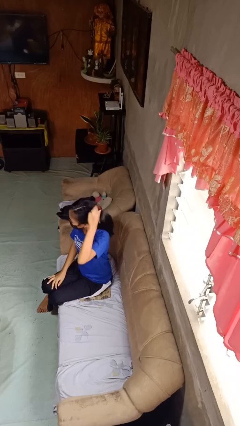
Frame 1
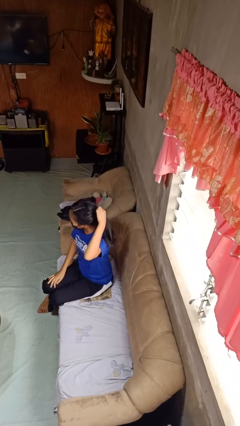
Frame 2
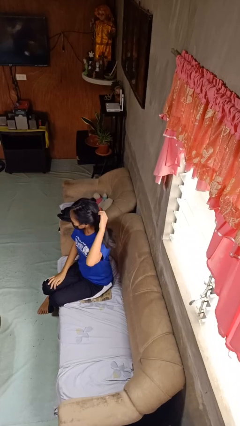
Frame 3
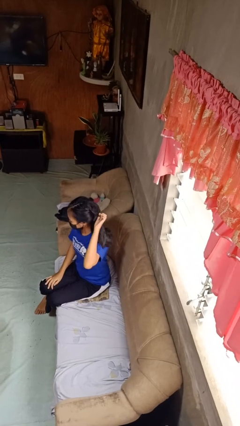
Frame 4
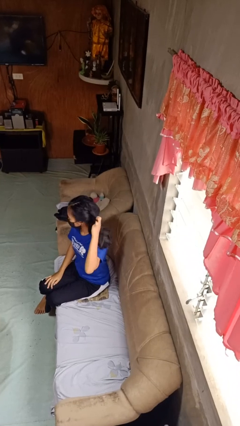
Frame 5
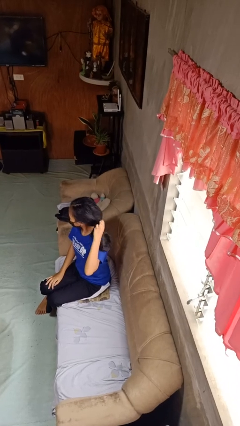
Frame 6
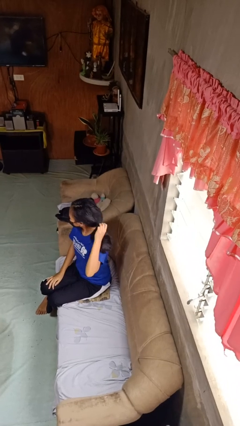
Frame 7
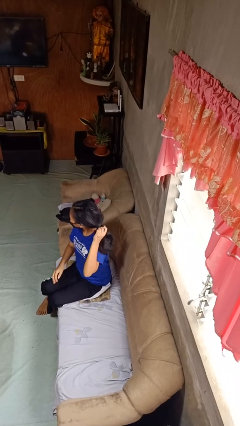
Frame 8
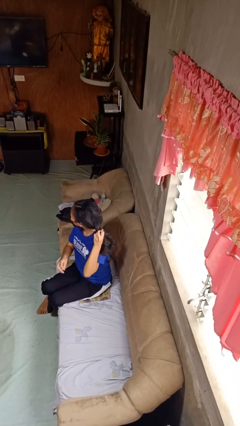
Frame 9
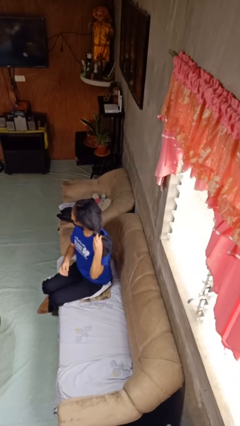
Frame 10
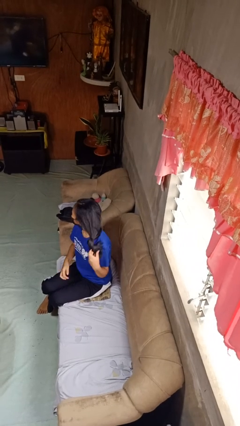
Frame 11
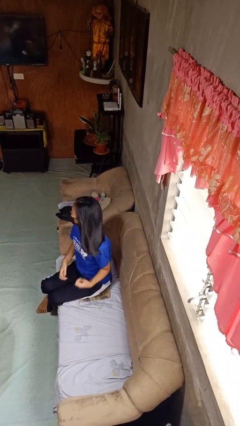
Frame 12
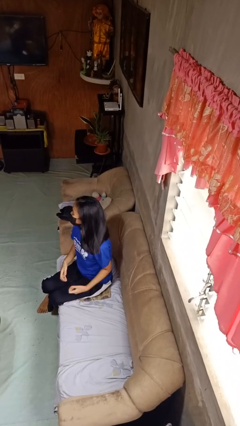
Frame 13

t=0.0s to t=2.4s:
person takes off hairtie

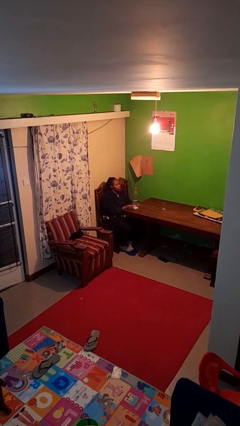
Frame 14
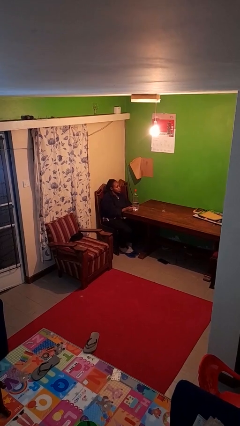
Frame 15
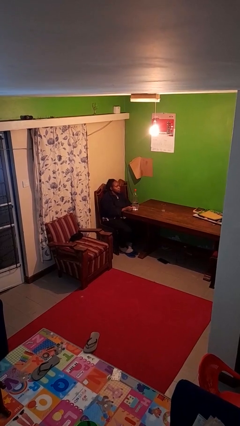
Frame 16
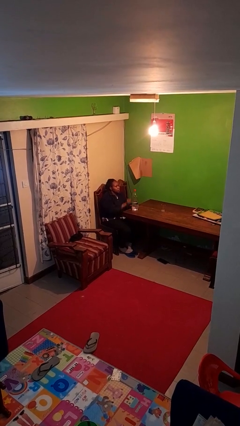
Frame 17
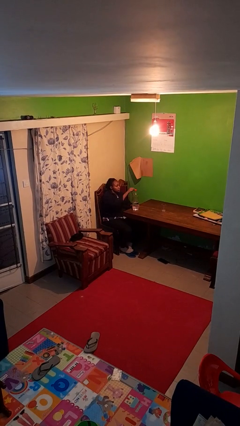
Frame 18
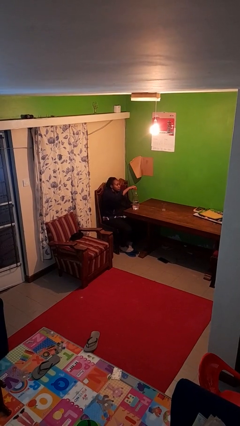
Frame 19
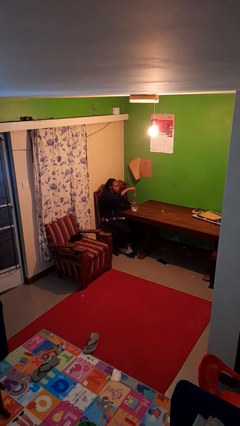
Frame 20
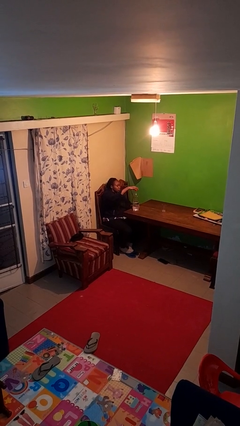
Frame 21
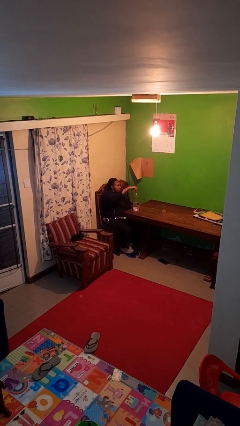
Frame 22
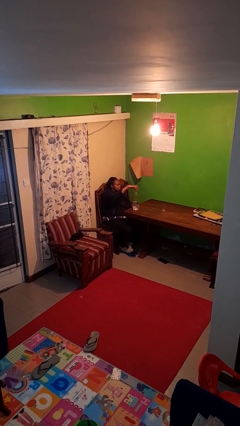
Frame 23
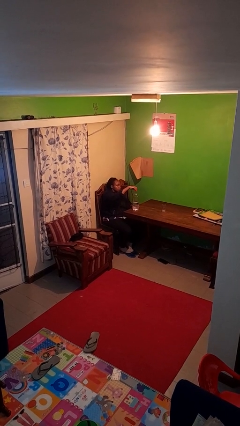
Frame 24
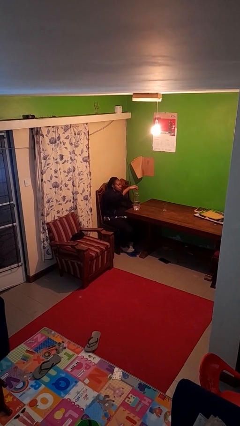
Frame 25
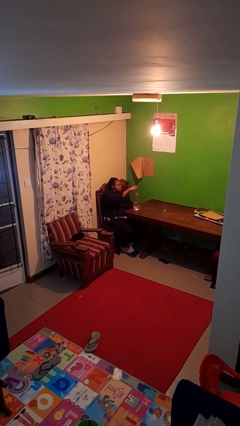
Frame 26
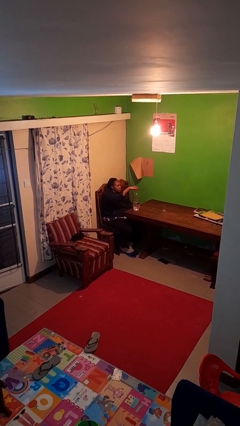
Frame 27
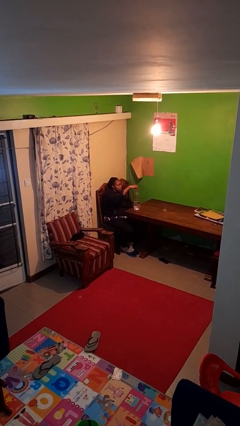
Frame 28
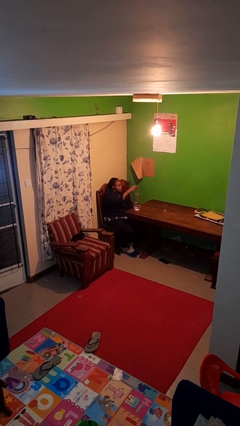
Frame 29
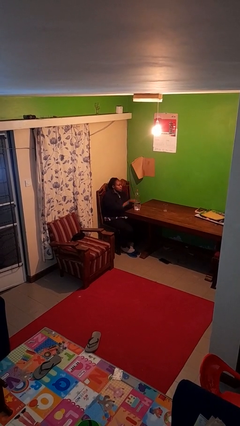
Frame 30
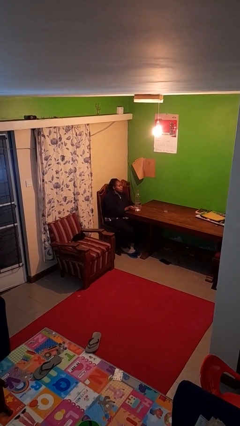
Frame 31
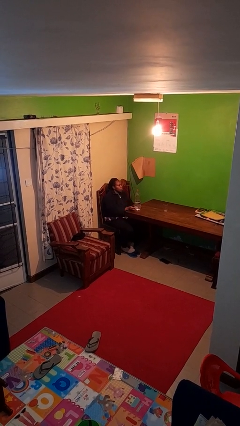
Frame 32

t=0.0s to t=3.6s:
person unscrews lid from bottle

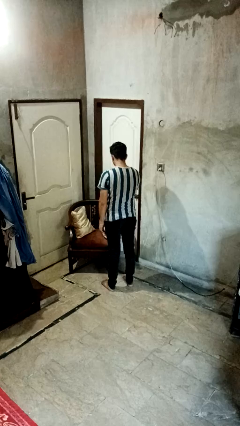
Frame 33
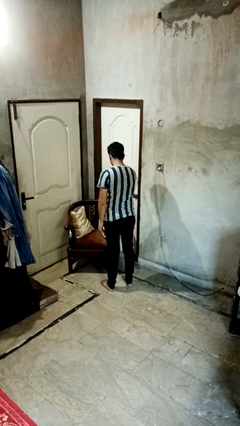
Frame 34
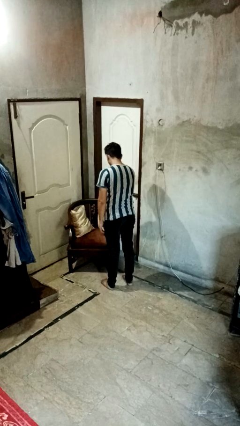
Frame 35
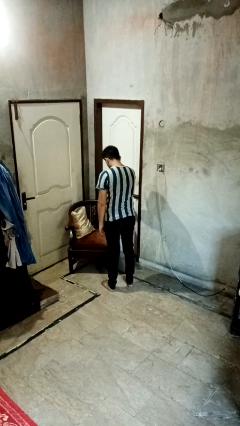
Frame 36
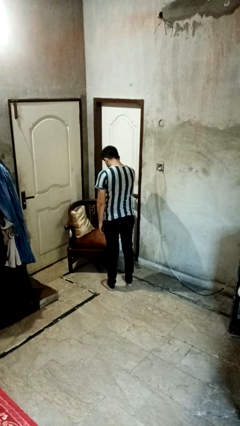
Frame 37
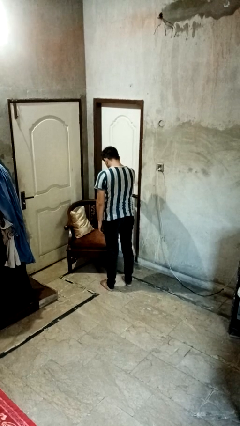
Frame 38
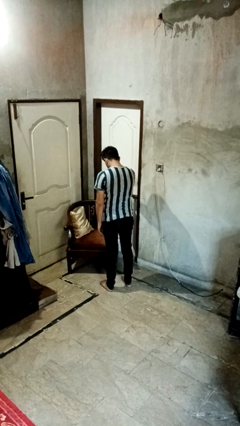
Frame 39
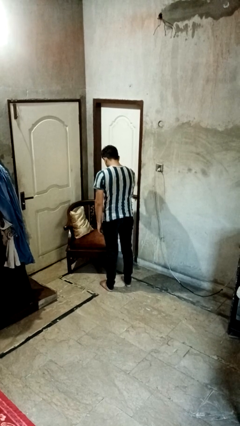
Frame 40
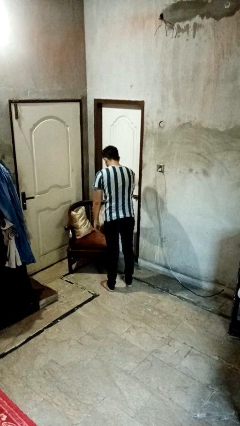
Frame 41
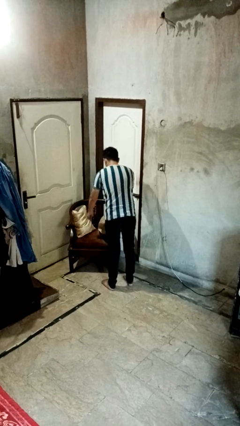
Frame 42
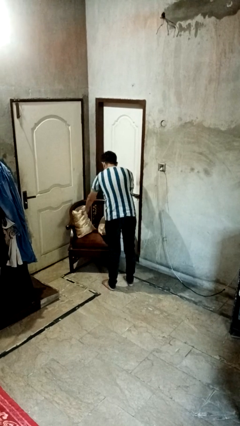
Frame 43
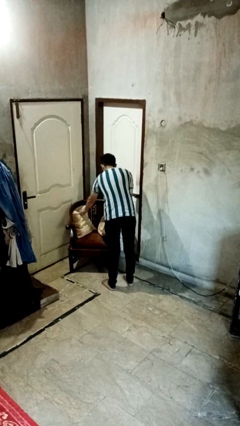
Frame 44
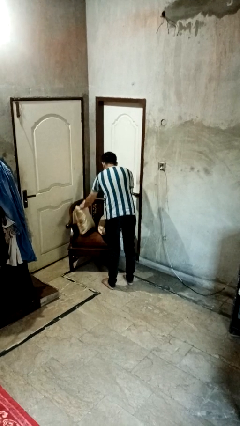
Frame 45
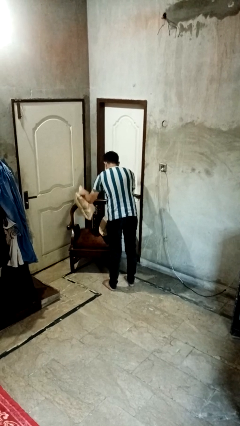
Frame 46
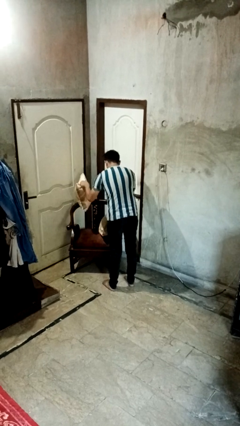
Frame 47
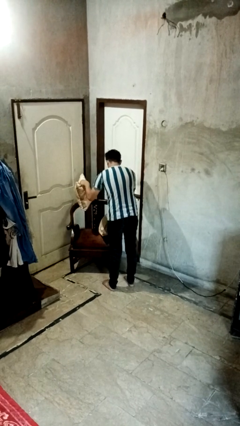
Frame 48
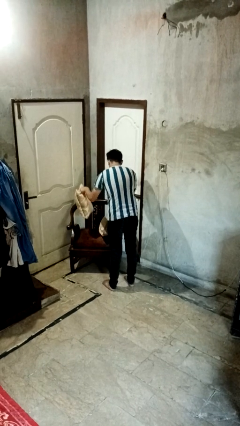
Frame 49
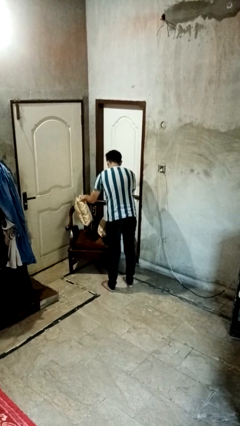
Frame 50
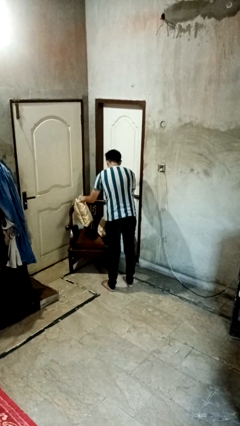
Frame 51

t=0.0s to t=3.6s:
person searches in couch

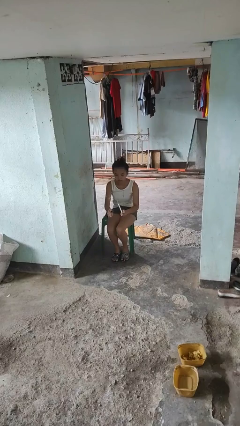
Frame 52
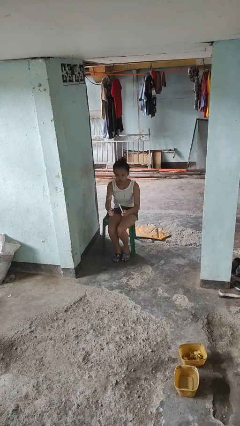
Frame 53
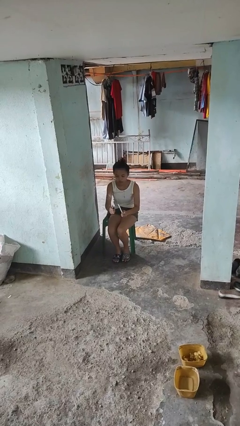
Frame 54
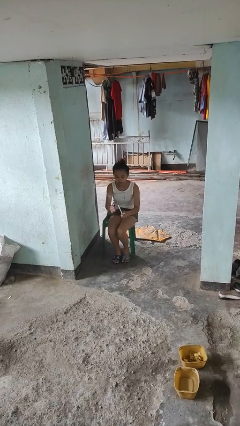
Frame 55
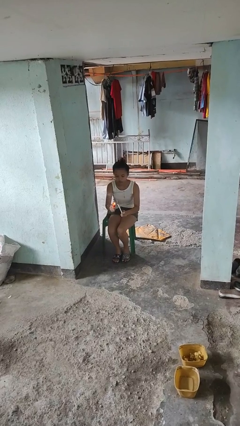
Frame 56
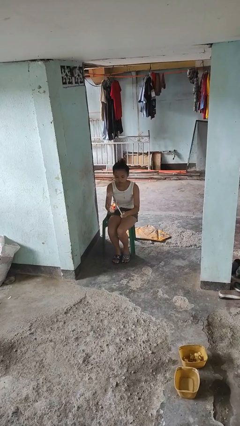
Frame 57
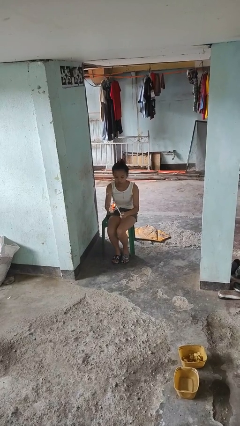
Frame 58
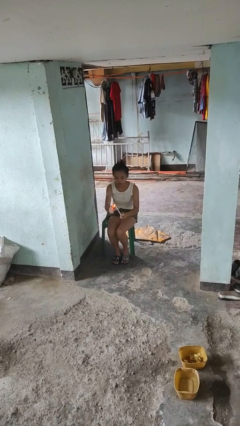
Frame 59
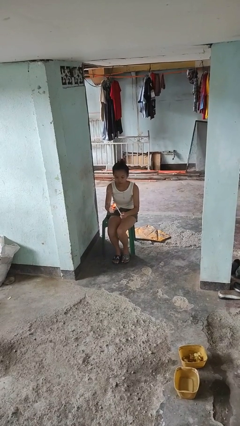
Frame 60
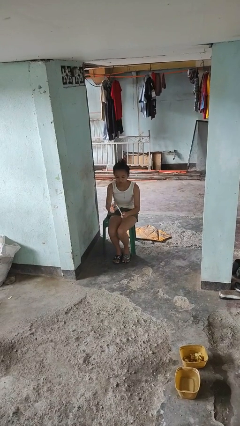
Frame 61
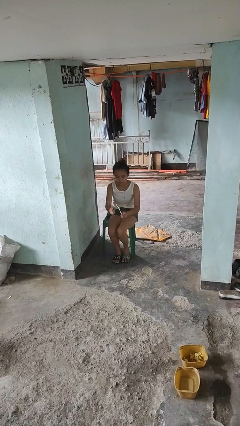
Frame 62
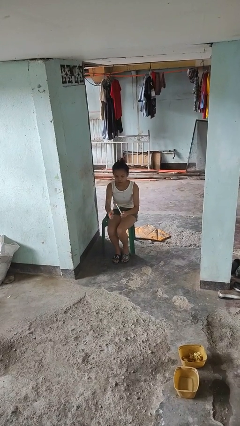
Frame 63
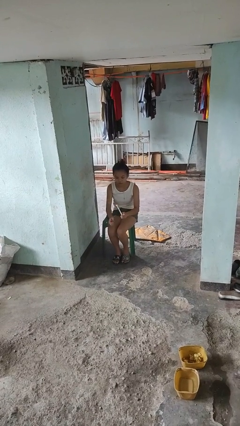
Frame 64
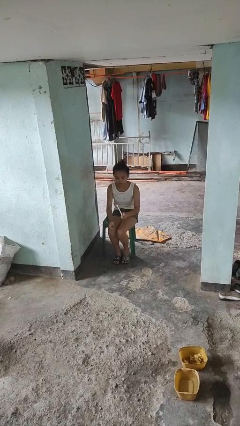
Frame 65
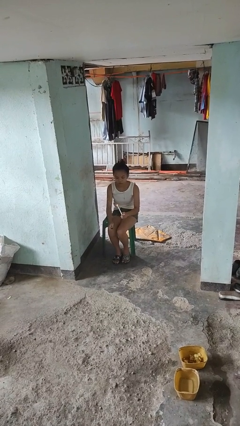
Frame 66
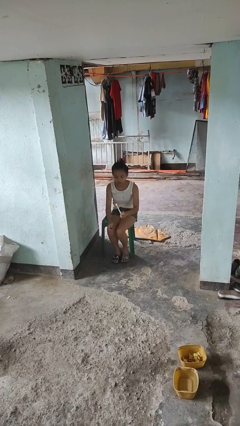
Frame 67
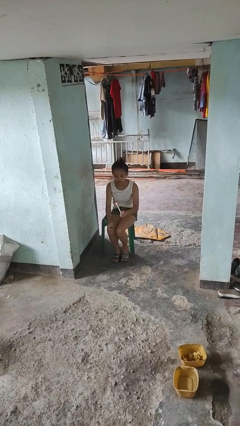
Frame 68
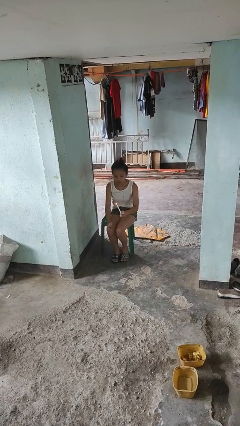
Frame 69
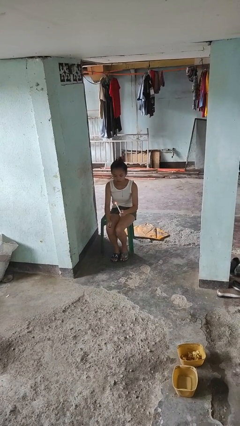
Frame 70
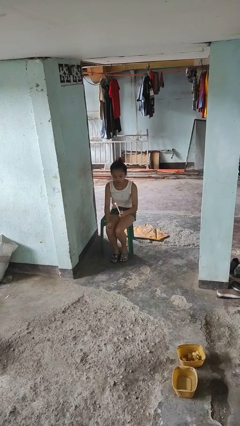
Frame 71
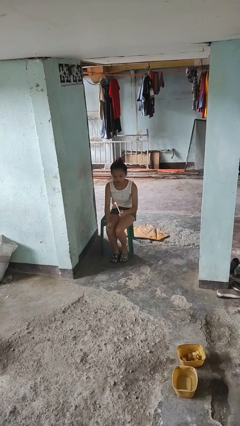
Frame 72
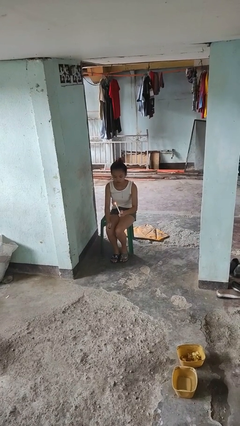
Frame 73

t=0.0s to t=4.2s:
person lights candle

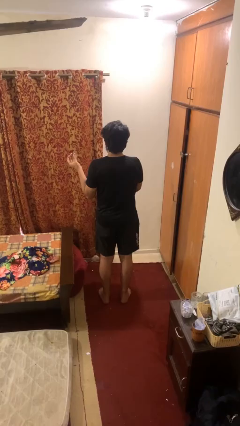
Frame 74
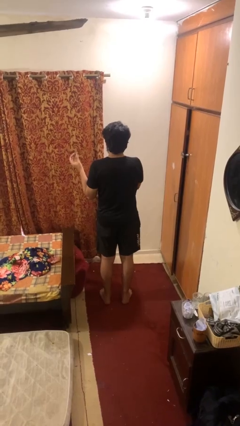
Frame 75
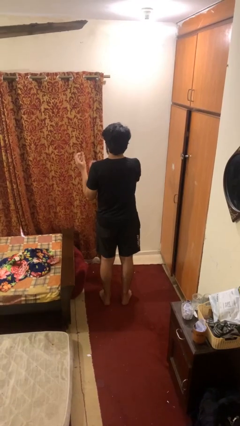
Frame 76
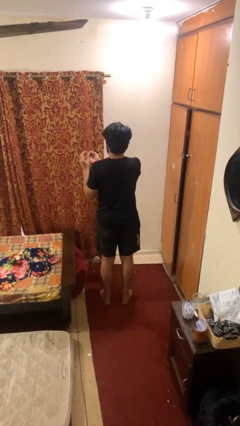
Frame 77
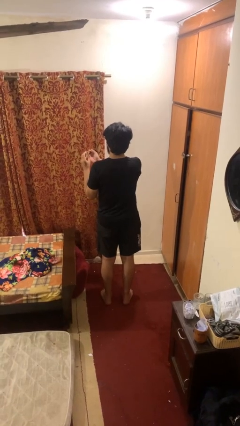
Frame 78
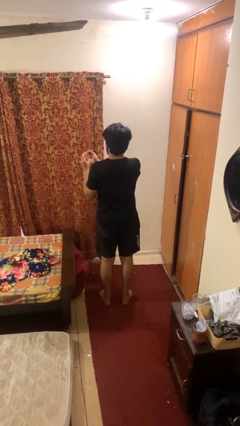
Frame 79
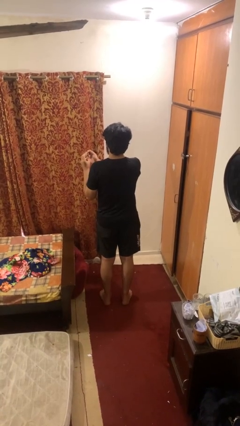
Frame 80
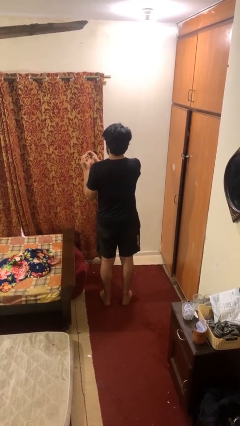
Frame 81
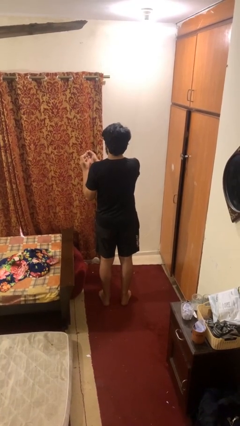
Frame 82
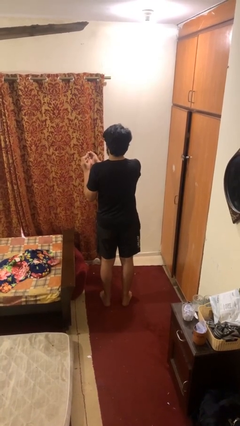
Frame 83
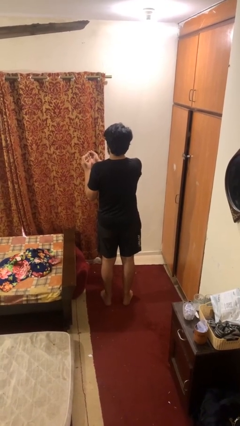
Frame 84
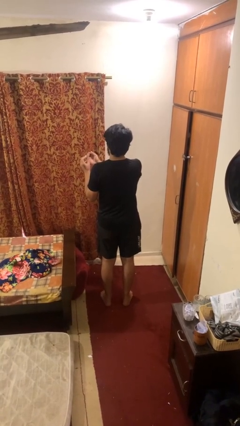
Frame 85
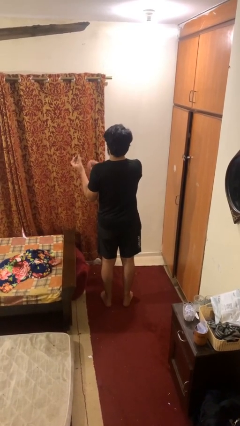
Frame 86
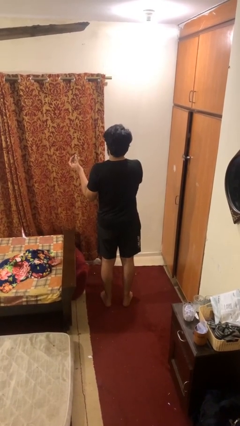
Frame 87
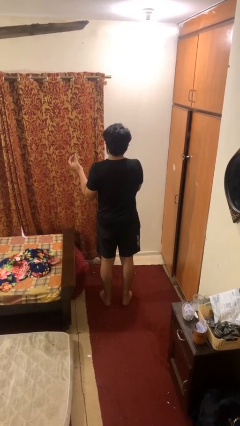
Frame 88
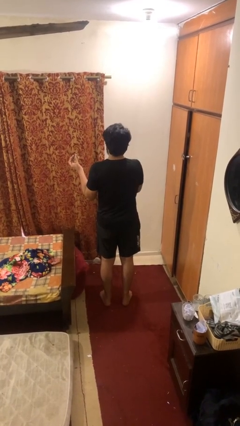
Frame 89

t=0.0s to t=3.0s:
person clips fingernails

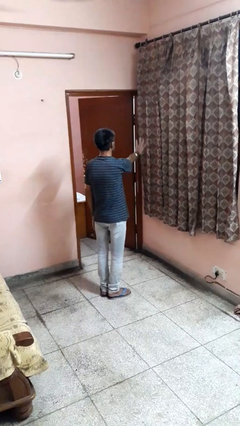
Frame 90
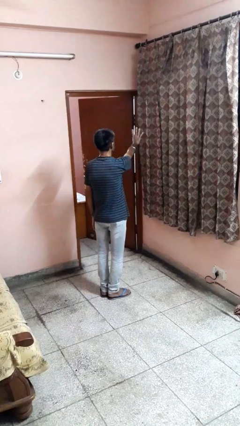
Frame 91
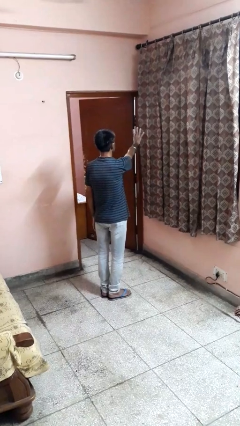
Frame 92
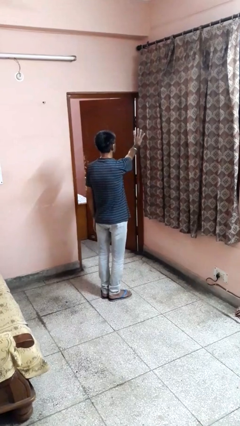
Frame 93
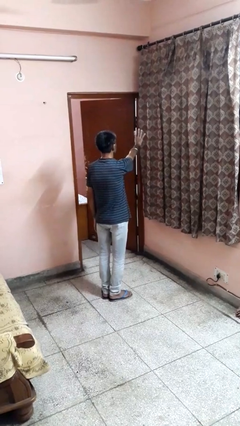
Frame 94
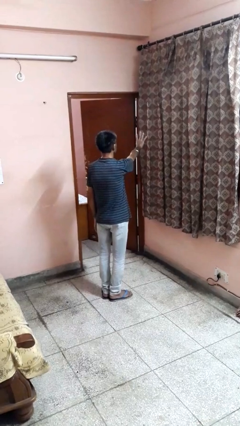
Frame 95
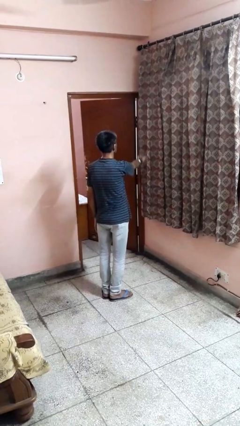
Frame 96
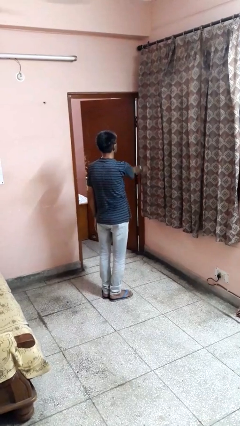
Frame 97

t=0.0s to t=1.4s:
person gestures number four
